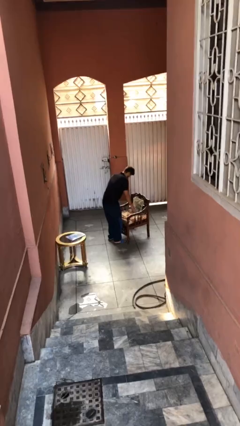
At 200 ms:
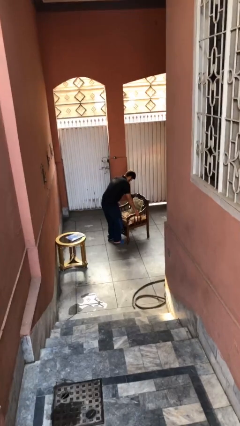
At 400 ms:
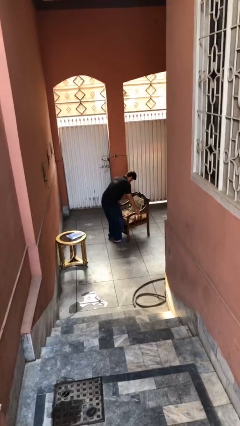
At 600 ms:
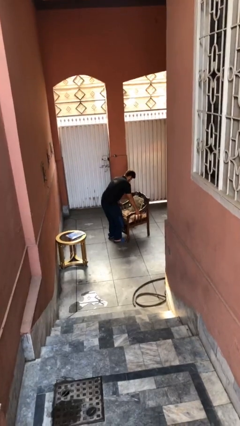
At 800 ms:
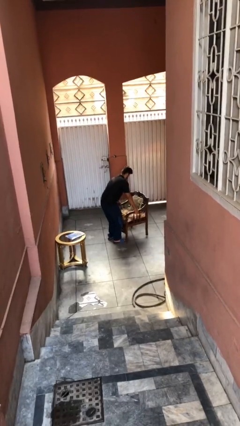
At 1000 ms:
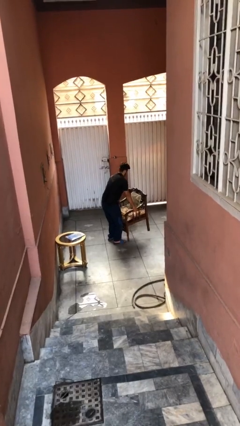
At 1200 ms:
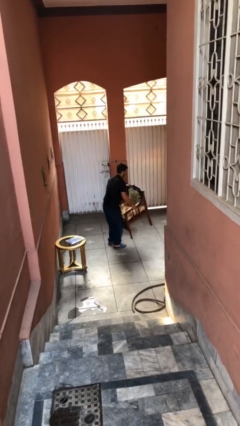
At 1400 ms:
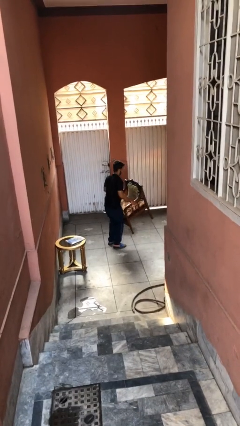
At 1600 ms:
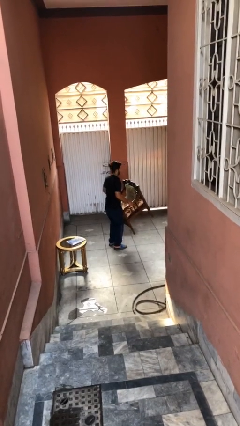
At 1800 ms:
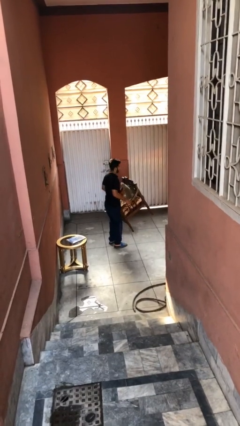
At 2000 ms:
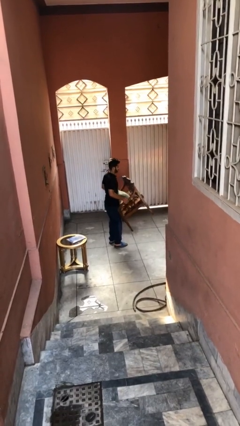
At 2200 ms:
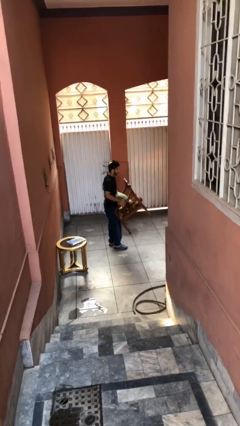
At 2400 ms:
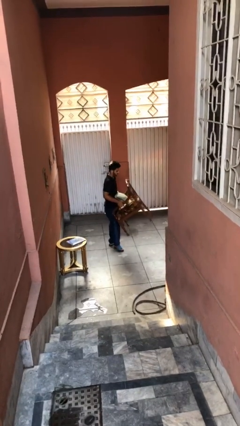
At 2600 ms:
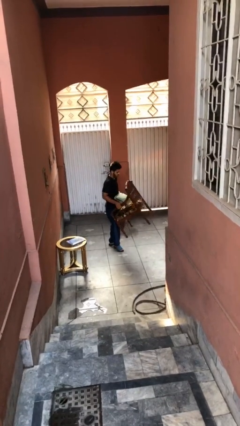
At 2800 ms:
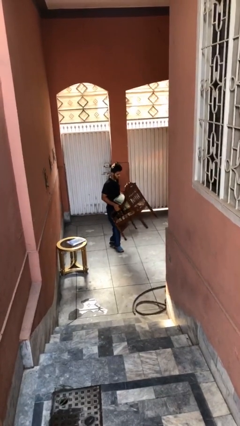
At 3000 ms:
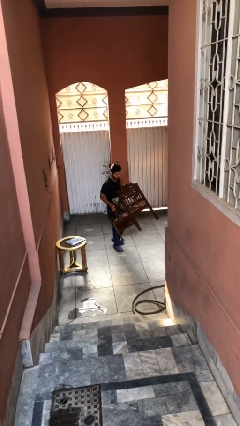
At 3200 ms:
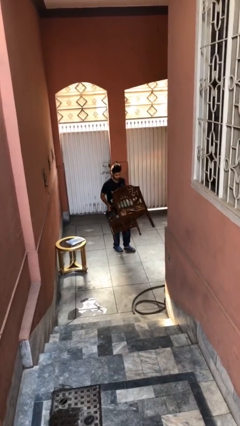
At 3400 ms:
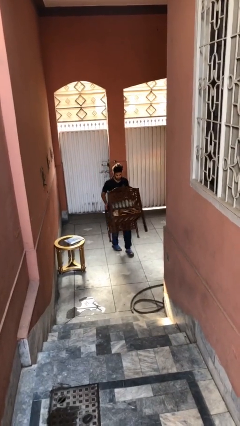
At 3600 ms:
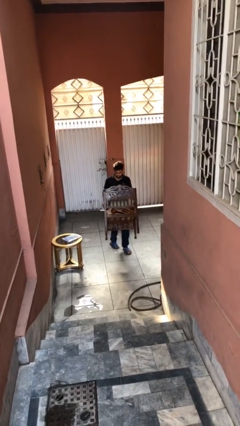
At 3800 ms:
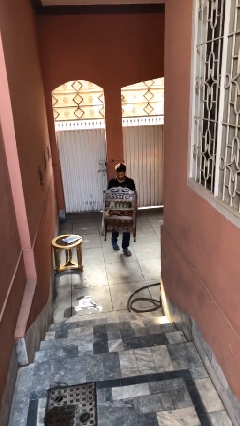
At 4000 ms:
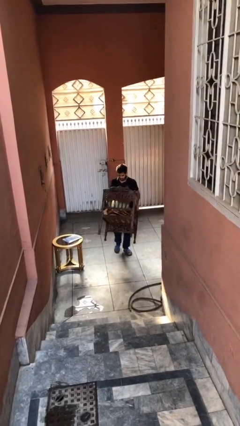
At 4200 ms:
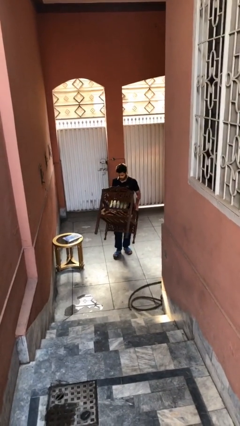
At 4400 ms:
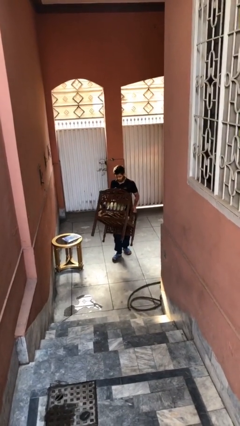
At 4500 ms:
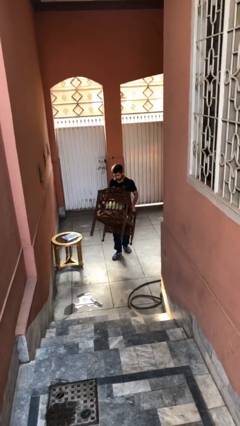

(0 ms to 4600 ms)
person picks up object from floor

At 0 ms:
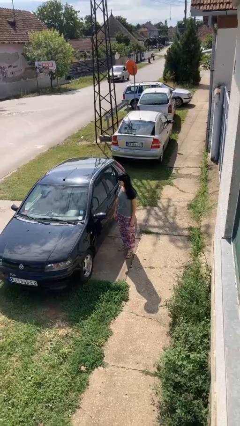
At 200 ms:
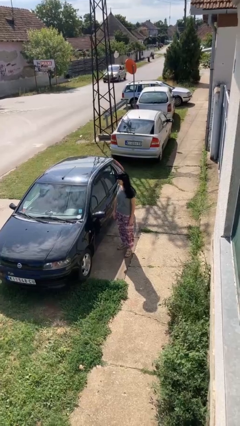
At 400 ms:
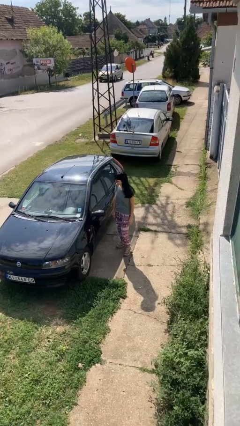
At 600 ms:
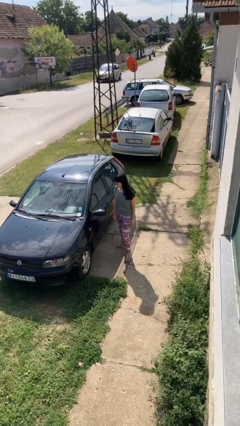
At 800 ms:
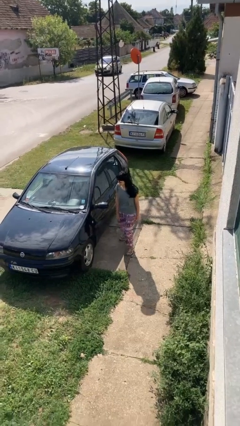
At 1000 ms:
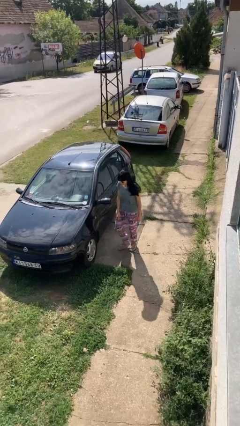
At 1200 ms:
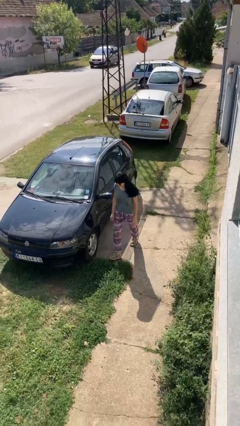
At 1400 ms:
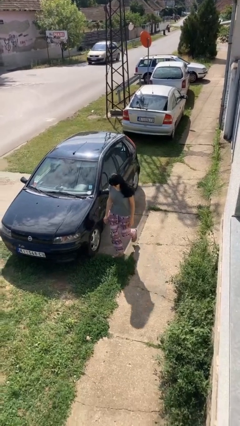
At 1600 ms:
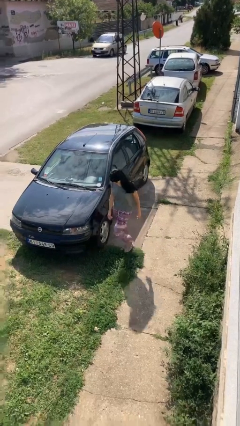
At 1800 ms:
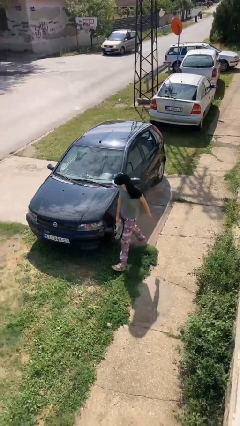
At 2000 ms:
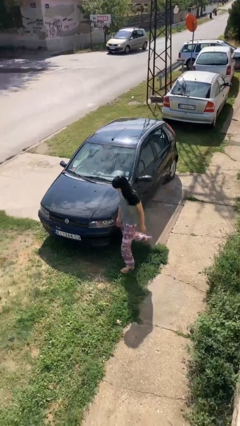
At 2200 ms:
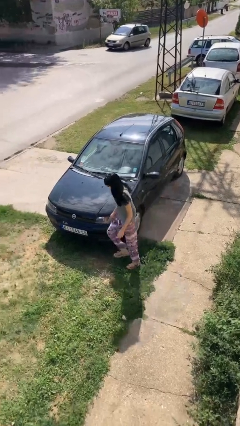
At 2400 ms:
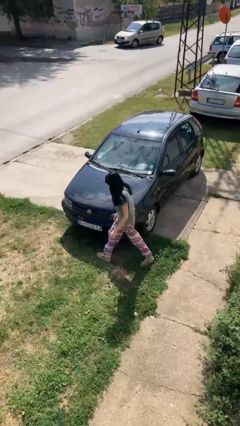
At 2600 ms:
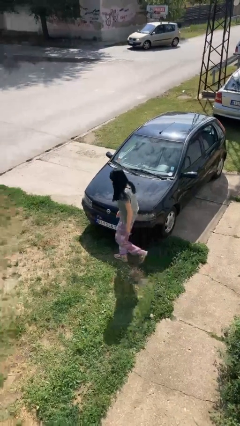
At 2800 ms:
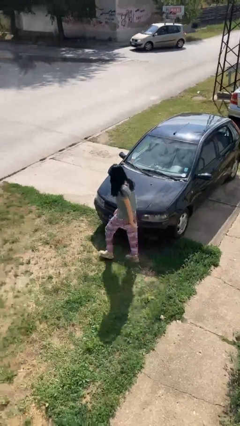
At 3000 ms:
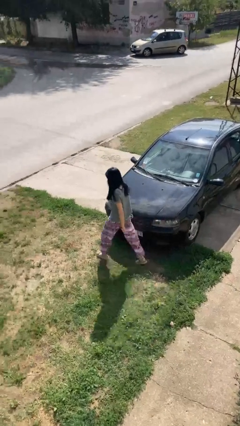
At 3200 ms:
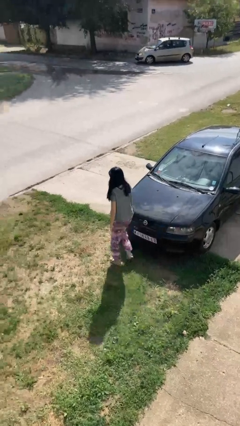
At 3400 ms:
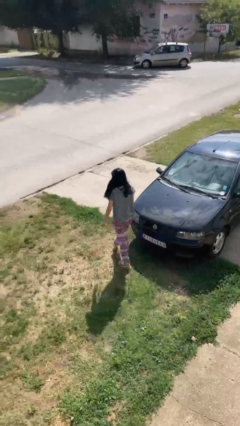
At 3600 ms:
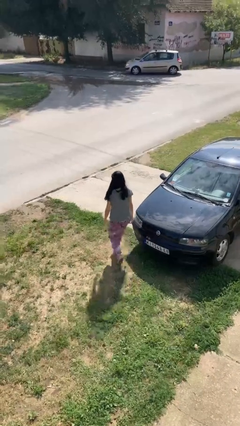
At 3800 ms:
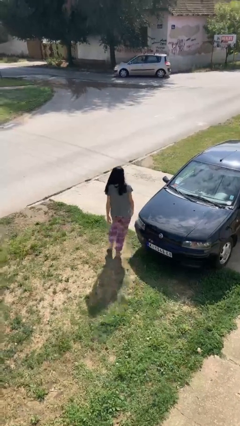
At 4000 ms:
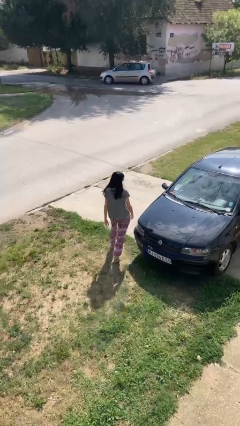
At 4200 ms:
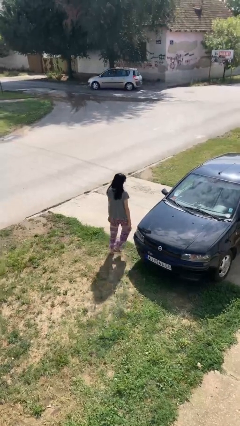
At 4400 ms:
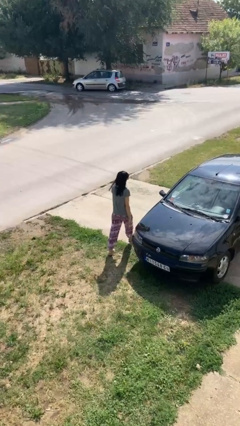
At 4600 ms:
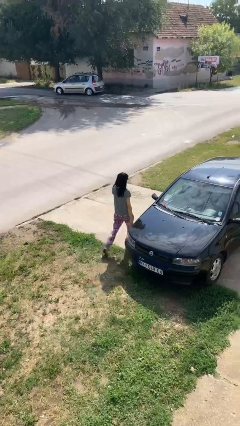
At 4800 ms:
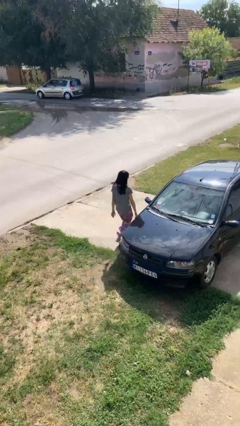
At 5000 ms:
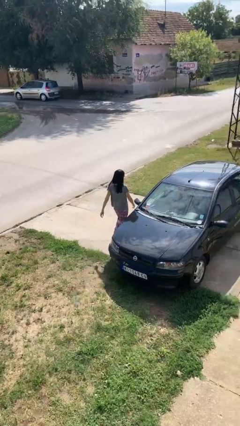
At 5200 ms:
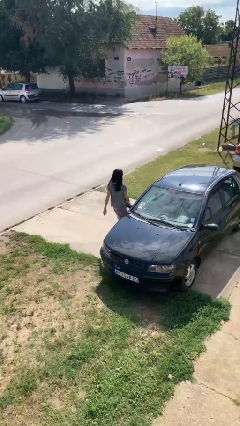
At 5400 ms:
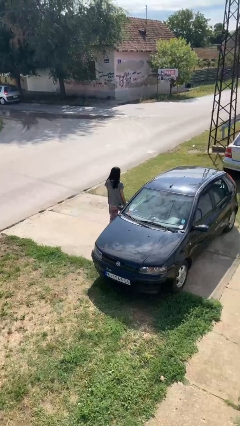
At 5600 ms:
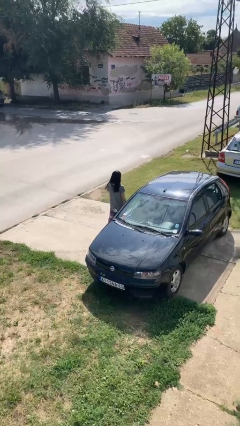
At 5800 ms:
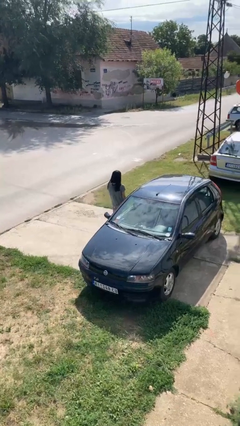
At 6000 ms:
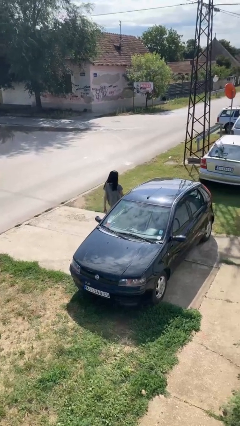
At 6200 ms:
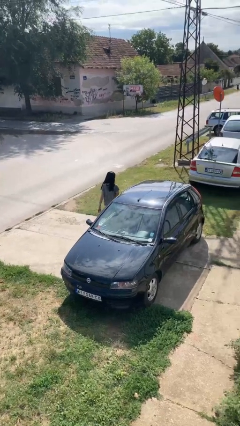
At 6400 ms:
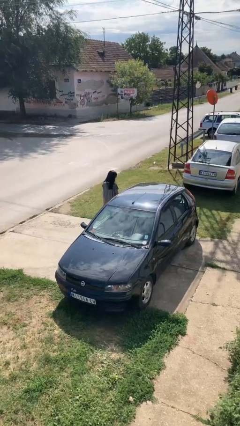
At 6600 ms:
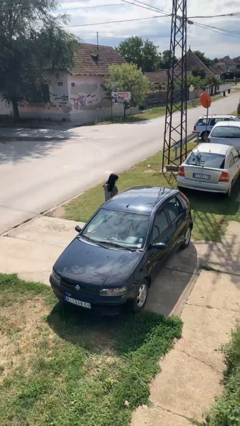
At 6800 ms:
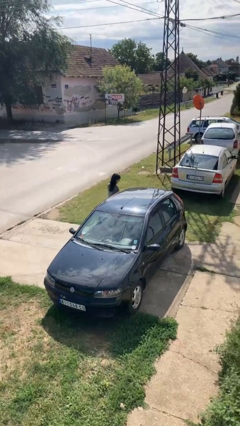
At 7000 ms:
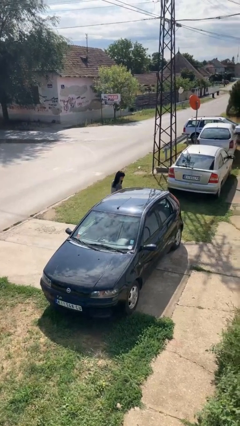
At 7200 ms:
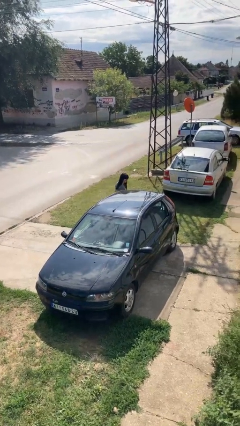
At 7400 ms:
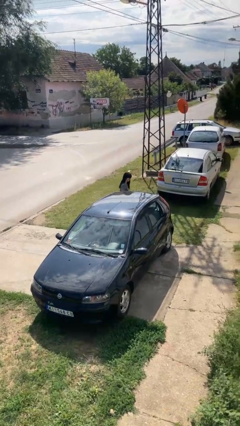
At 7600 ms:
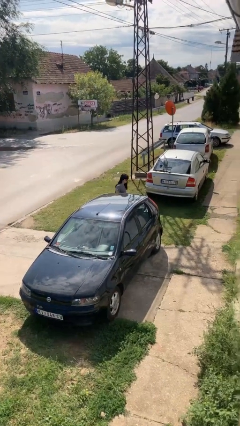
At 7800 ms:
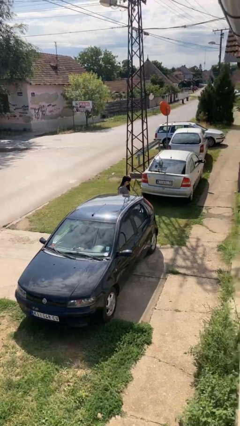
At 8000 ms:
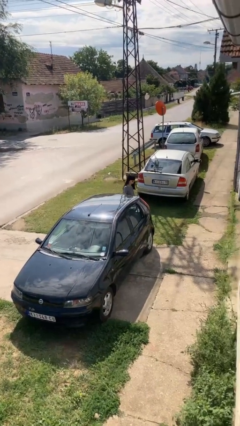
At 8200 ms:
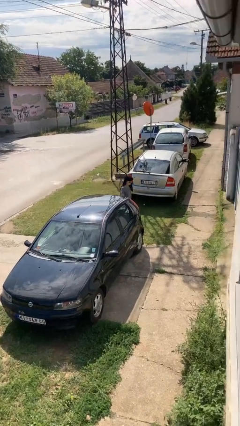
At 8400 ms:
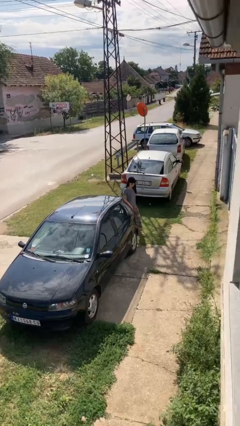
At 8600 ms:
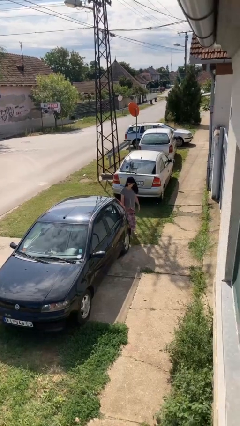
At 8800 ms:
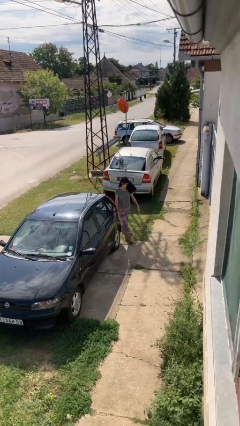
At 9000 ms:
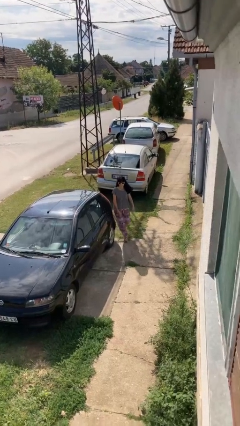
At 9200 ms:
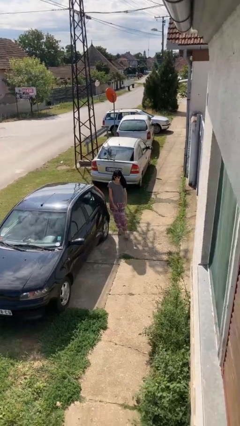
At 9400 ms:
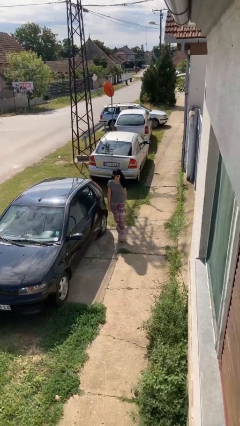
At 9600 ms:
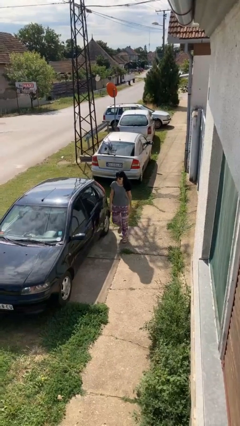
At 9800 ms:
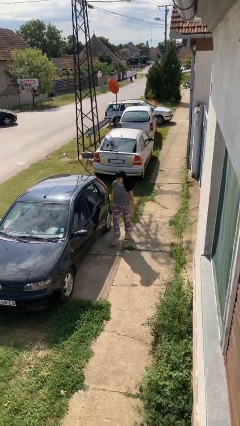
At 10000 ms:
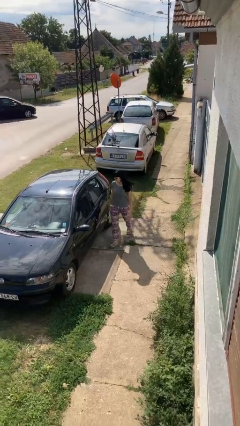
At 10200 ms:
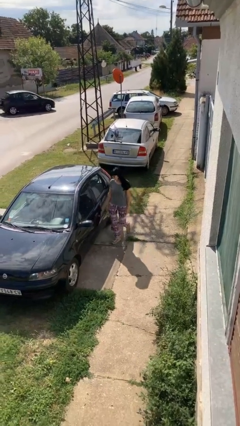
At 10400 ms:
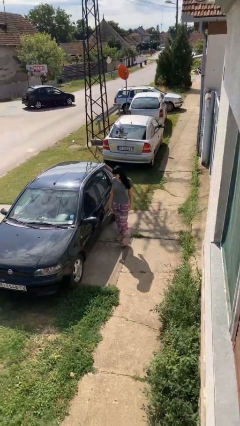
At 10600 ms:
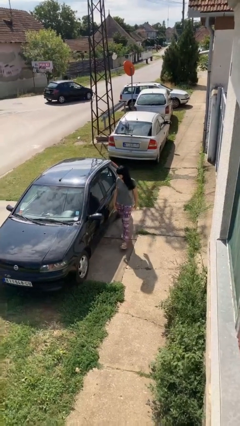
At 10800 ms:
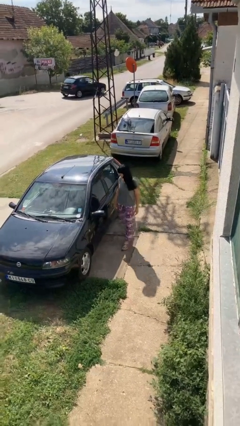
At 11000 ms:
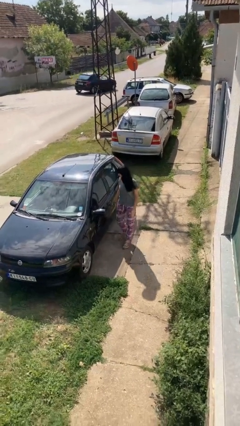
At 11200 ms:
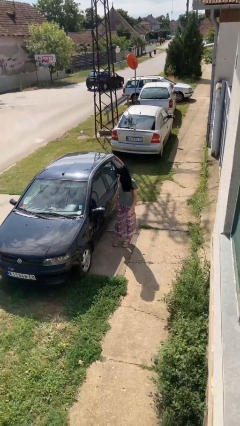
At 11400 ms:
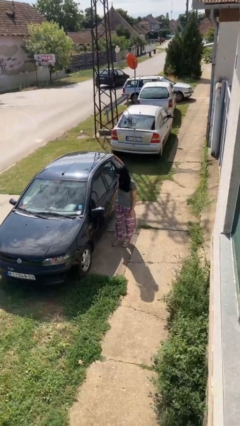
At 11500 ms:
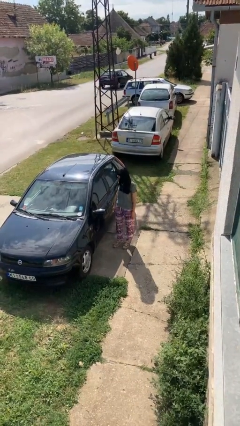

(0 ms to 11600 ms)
person walks around car

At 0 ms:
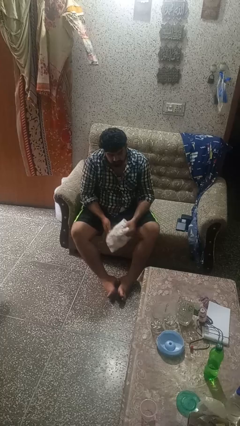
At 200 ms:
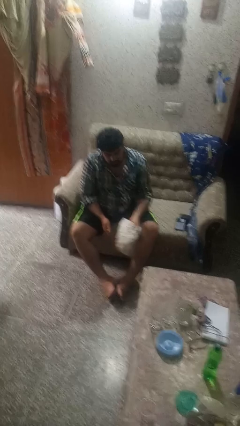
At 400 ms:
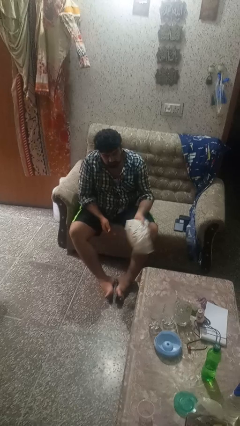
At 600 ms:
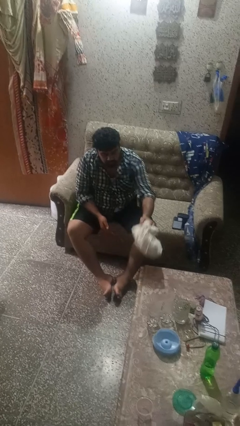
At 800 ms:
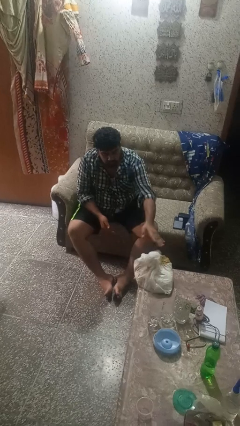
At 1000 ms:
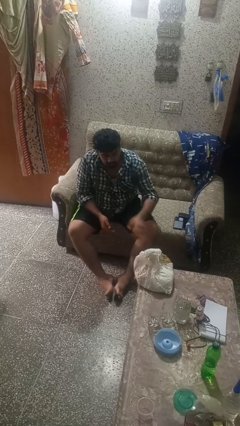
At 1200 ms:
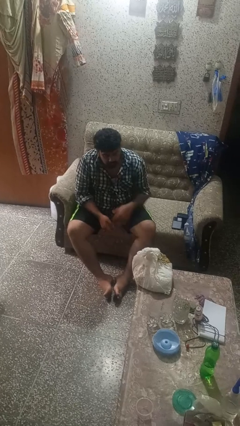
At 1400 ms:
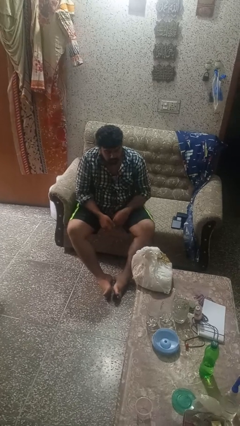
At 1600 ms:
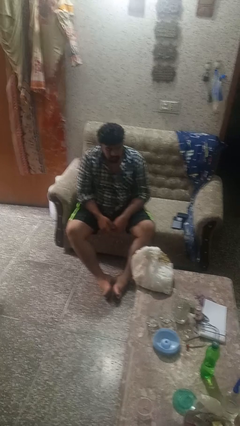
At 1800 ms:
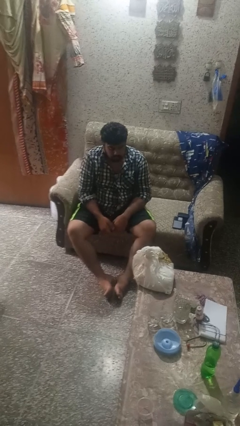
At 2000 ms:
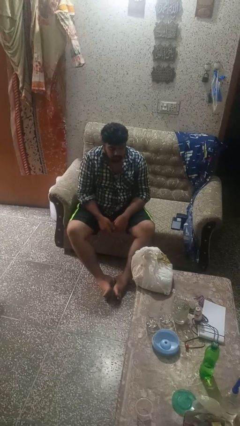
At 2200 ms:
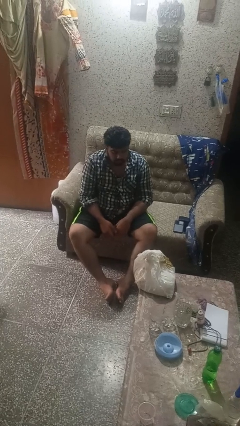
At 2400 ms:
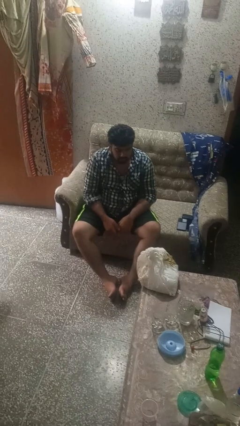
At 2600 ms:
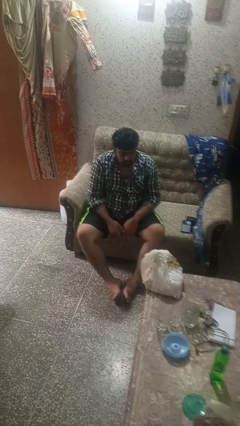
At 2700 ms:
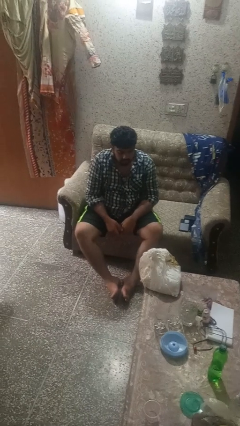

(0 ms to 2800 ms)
person throws object on table
